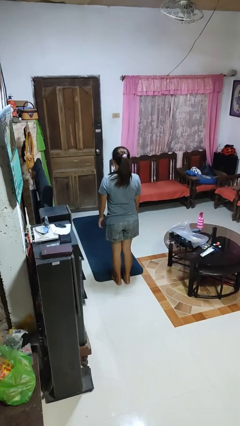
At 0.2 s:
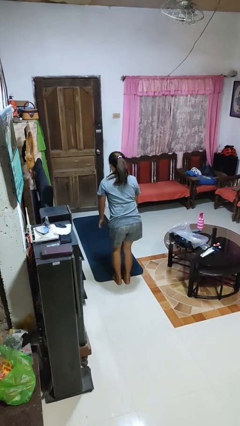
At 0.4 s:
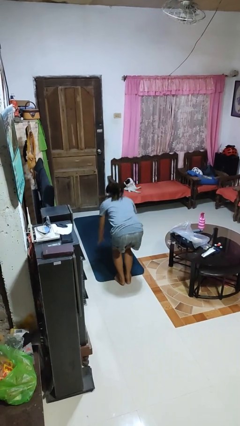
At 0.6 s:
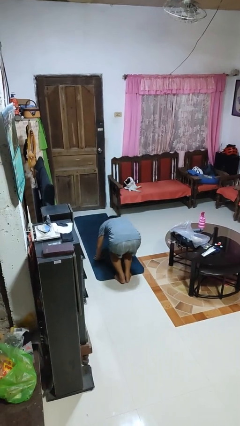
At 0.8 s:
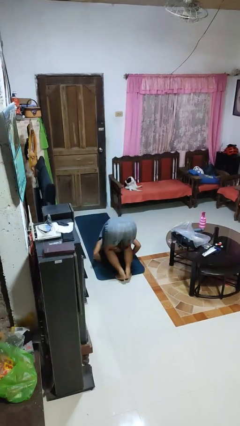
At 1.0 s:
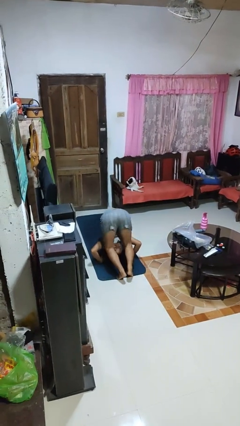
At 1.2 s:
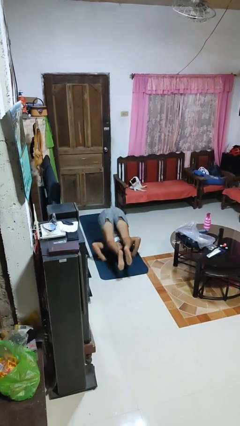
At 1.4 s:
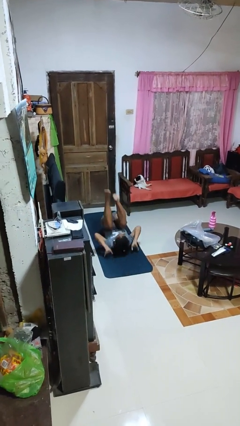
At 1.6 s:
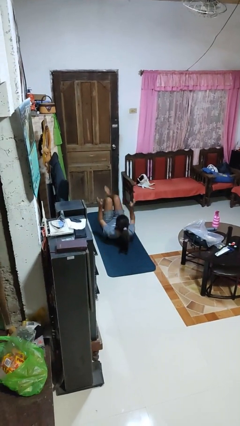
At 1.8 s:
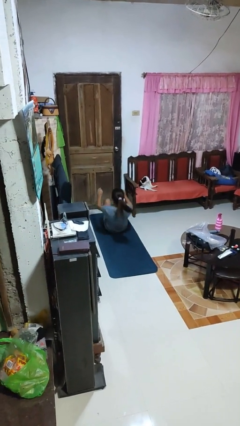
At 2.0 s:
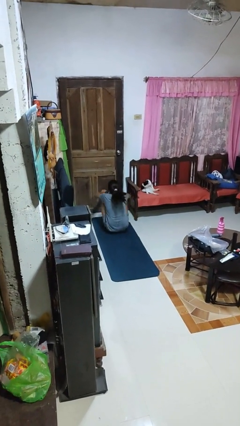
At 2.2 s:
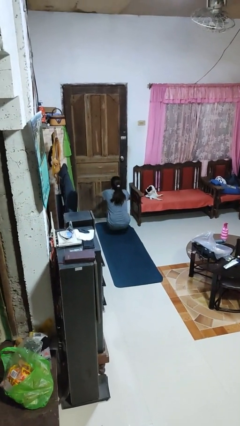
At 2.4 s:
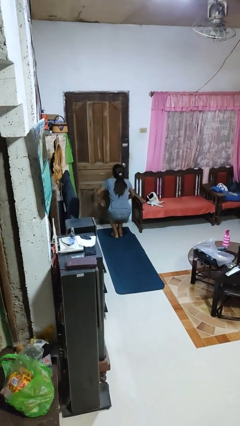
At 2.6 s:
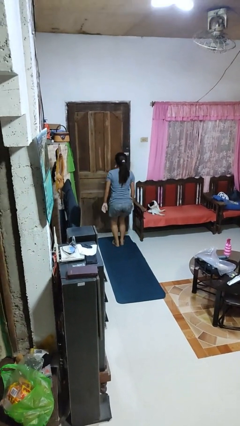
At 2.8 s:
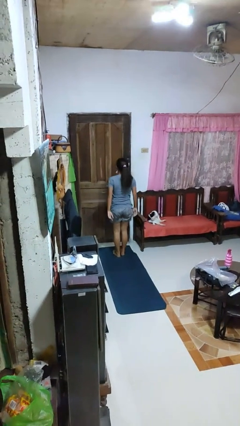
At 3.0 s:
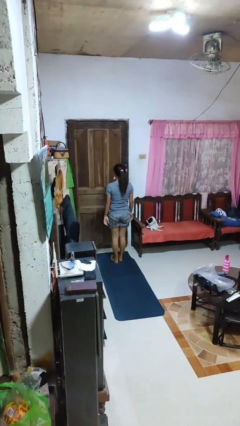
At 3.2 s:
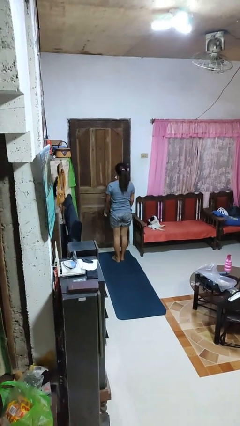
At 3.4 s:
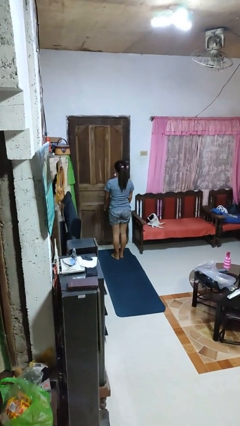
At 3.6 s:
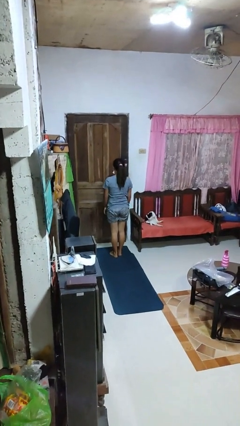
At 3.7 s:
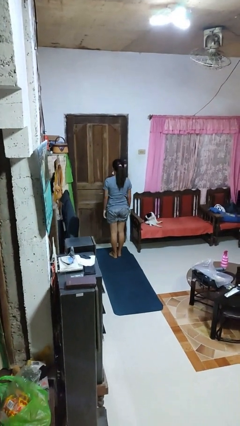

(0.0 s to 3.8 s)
person somersaults

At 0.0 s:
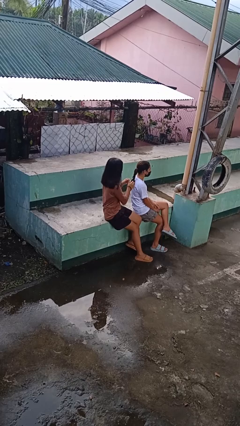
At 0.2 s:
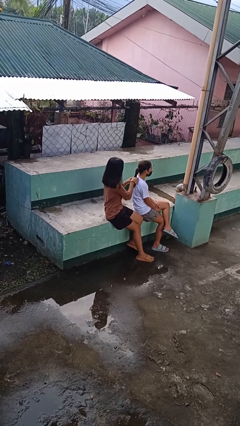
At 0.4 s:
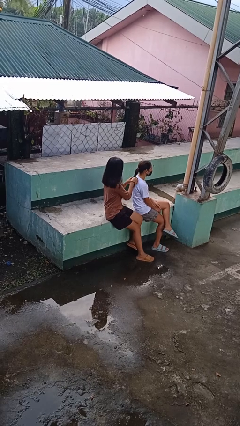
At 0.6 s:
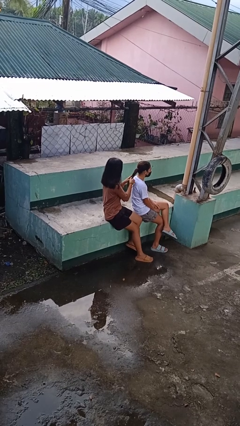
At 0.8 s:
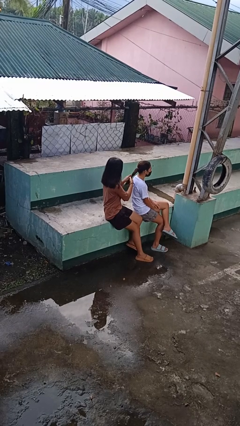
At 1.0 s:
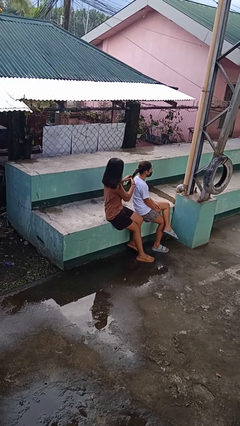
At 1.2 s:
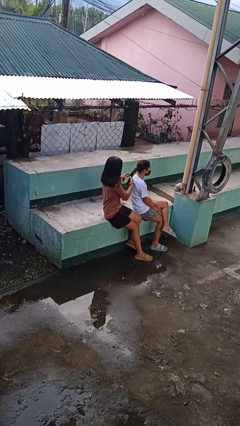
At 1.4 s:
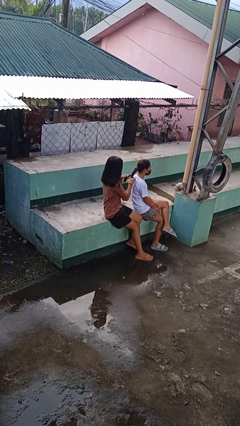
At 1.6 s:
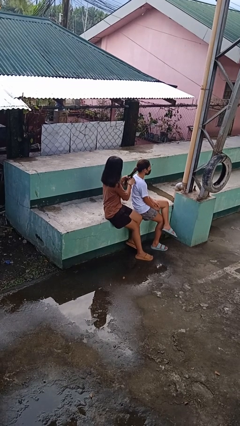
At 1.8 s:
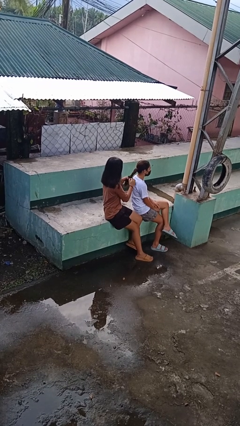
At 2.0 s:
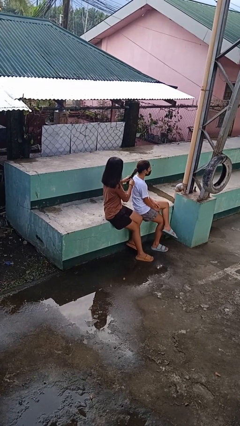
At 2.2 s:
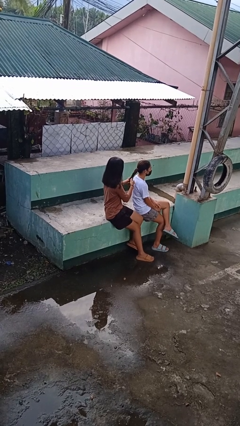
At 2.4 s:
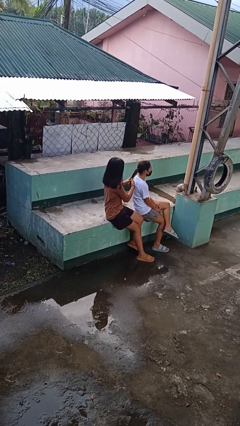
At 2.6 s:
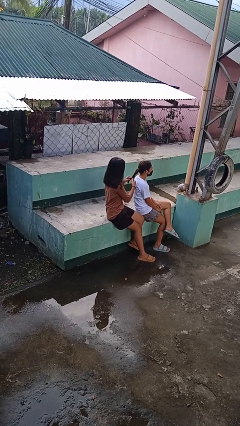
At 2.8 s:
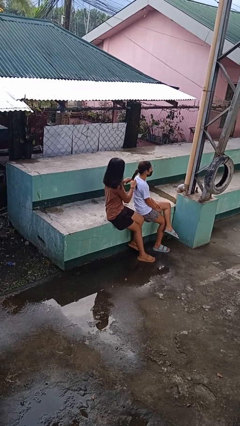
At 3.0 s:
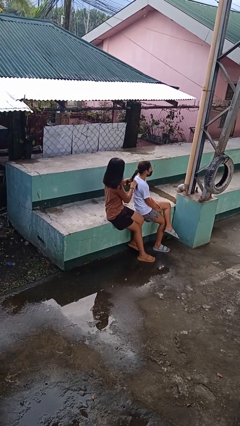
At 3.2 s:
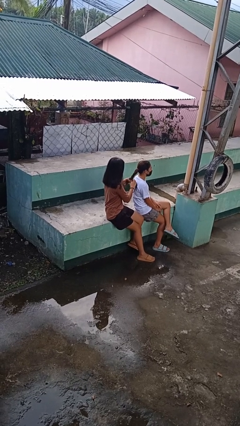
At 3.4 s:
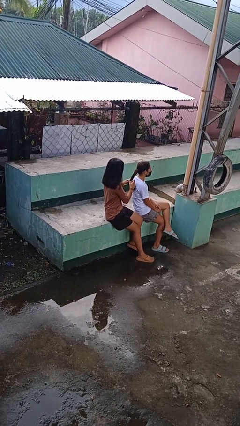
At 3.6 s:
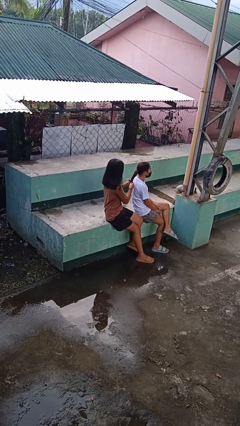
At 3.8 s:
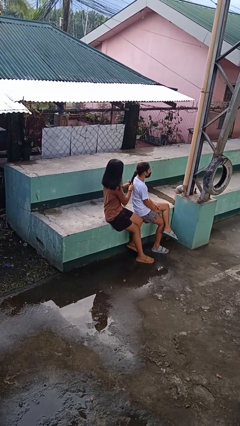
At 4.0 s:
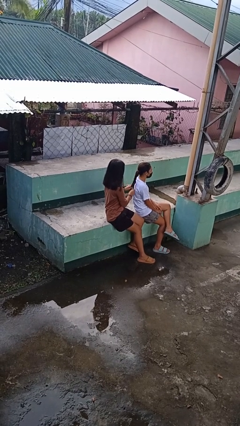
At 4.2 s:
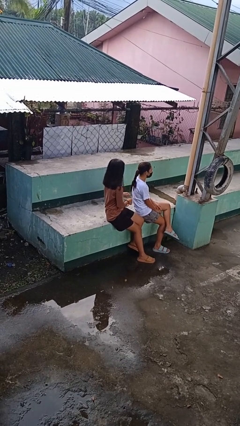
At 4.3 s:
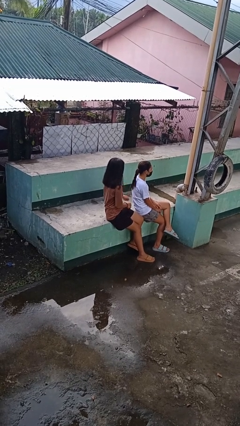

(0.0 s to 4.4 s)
person braids hair of person

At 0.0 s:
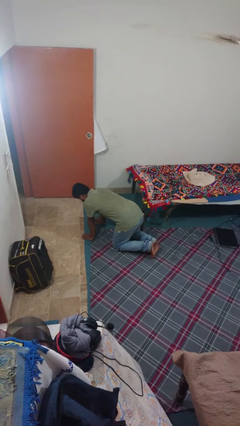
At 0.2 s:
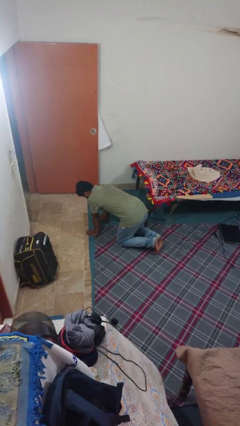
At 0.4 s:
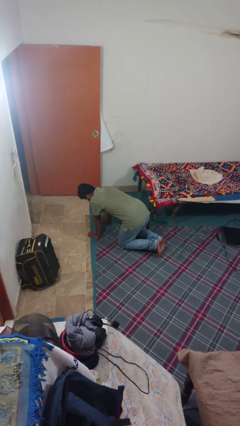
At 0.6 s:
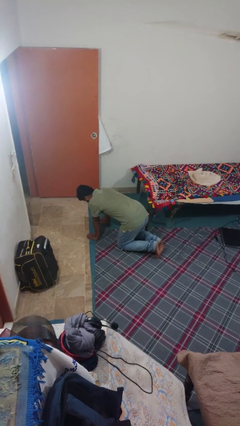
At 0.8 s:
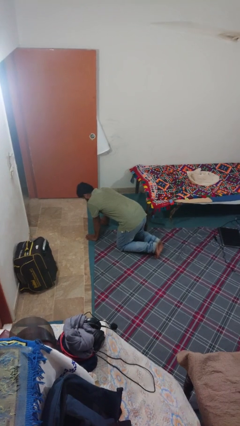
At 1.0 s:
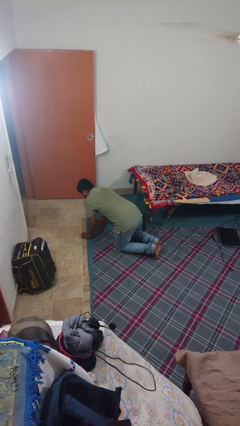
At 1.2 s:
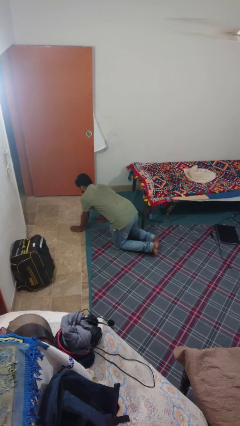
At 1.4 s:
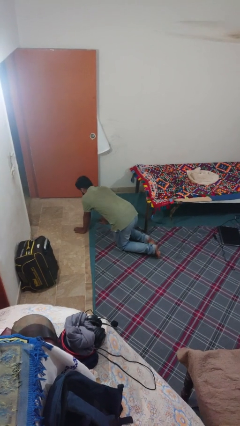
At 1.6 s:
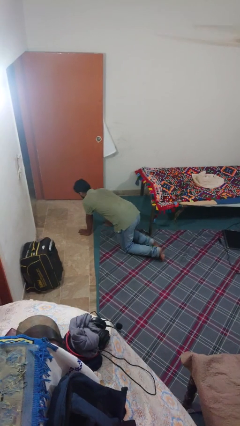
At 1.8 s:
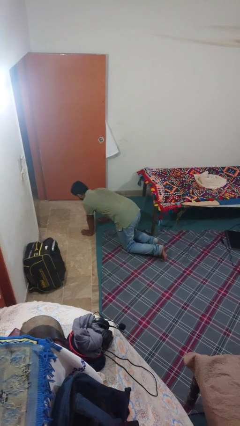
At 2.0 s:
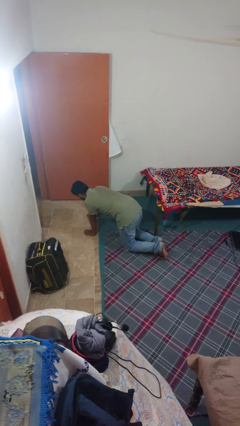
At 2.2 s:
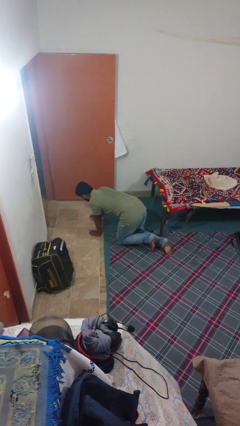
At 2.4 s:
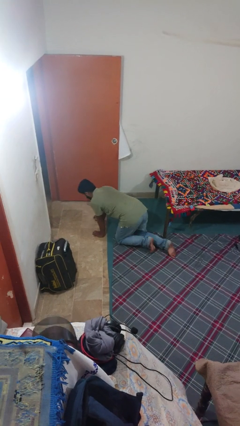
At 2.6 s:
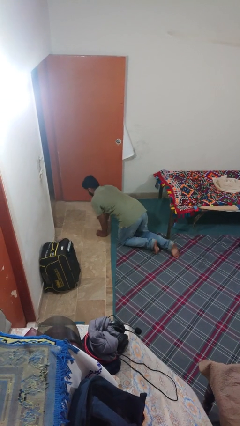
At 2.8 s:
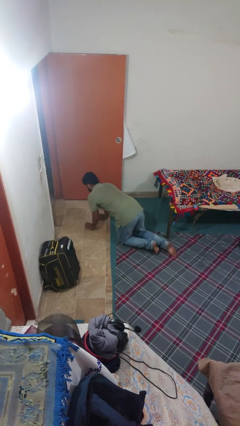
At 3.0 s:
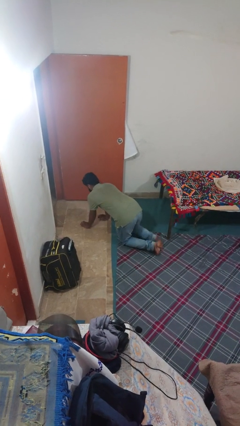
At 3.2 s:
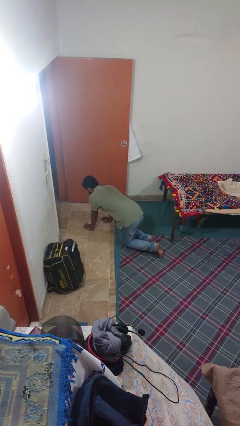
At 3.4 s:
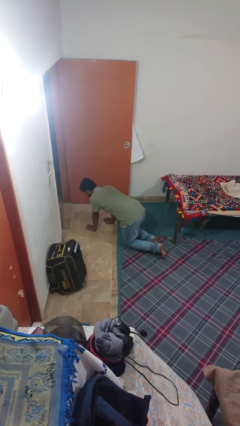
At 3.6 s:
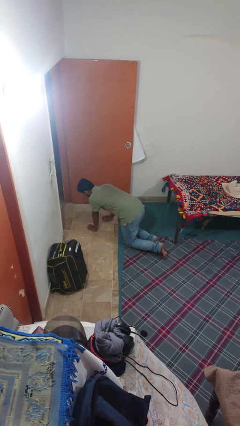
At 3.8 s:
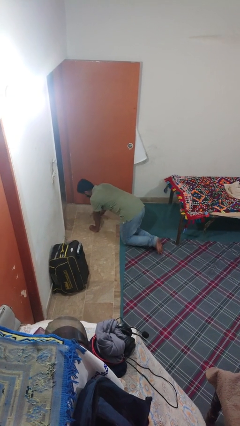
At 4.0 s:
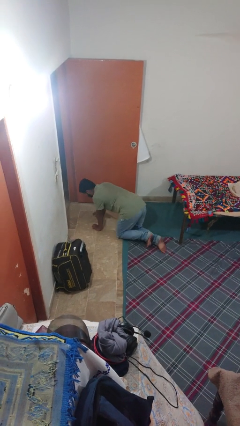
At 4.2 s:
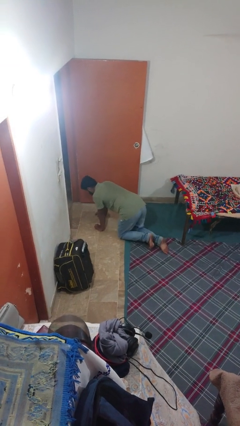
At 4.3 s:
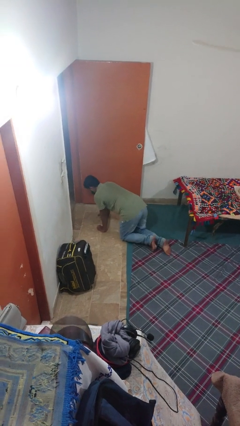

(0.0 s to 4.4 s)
person crawls

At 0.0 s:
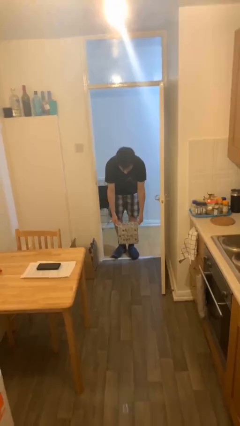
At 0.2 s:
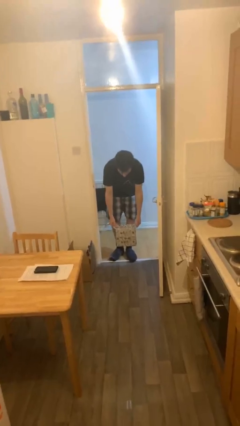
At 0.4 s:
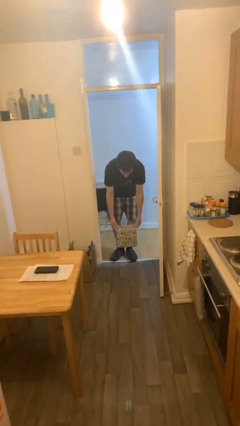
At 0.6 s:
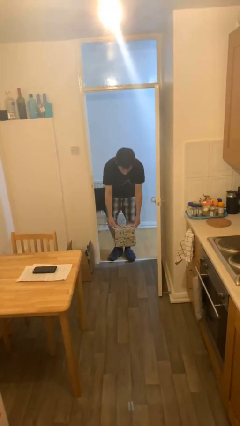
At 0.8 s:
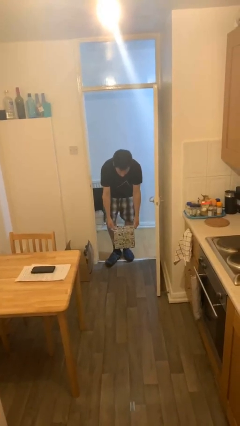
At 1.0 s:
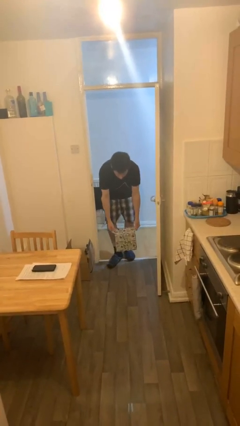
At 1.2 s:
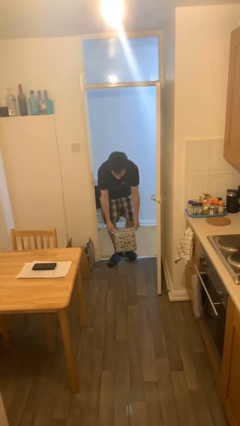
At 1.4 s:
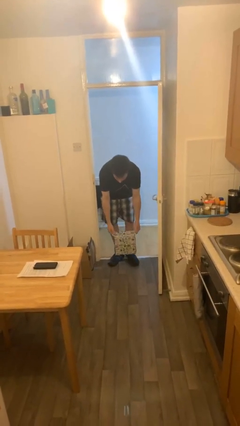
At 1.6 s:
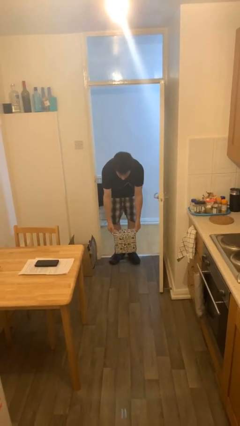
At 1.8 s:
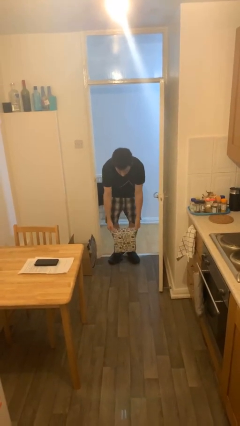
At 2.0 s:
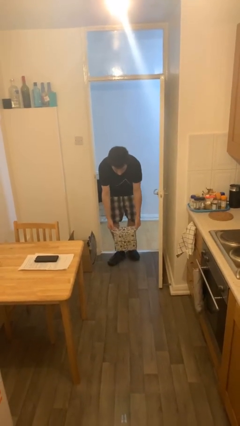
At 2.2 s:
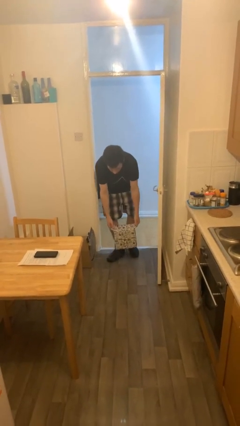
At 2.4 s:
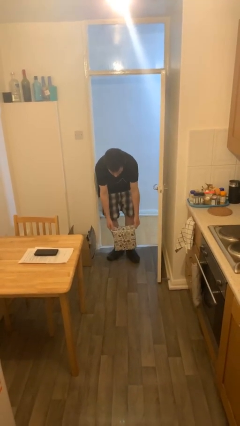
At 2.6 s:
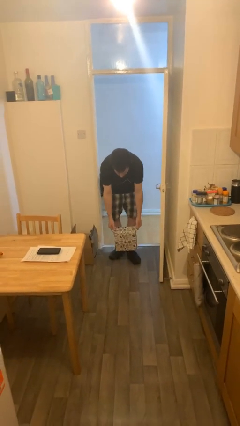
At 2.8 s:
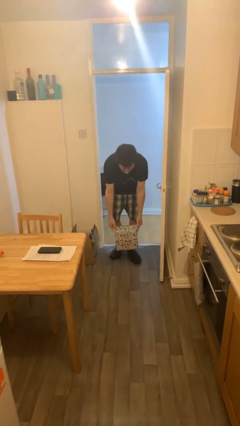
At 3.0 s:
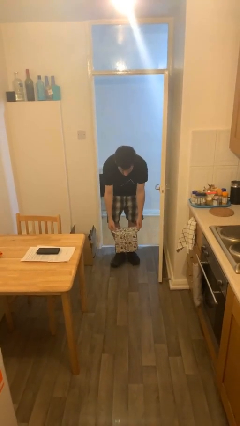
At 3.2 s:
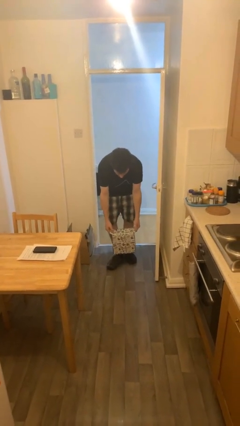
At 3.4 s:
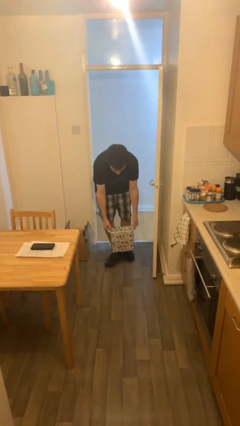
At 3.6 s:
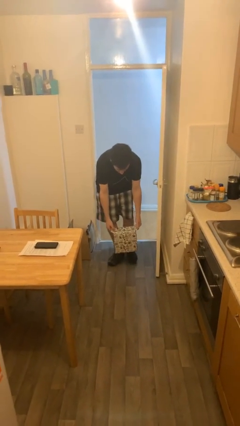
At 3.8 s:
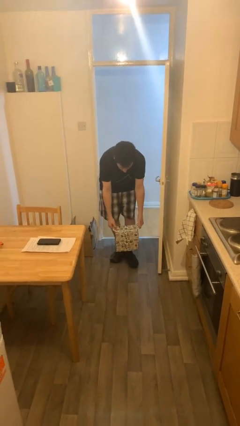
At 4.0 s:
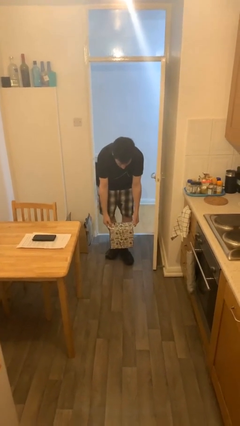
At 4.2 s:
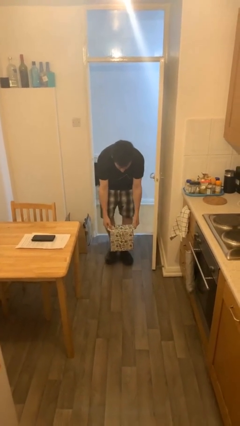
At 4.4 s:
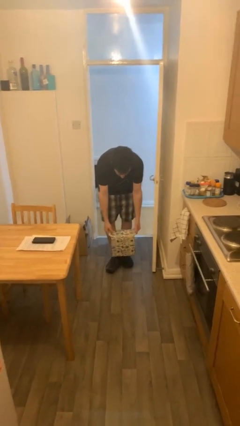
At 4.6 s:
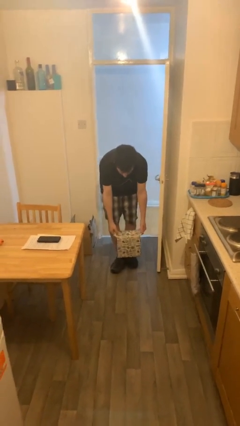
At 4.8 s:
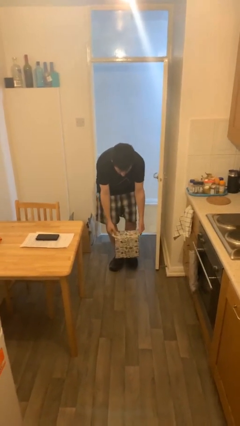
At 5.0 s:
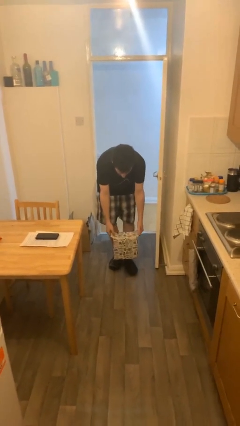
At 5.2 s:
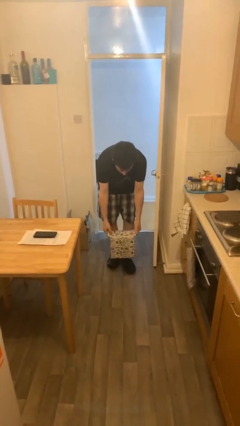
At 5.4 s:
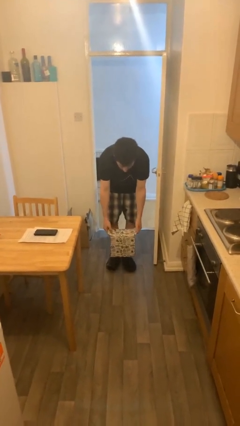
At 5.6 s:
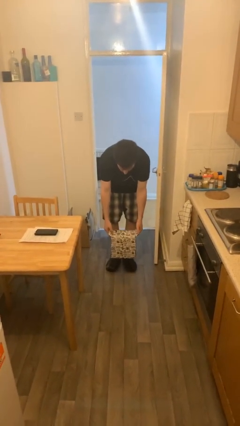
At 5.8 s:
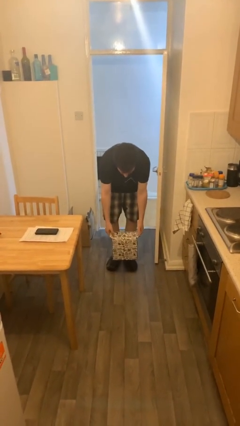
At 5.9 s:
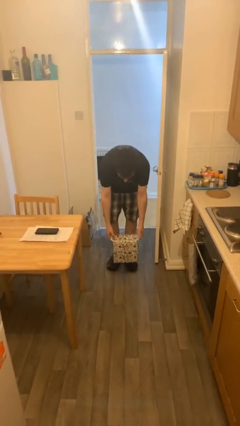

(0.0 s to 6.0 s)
person carries heavy object
